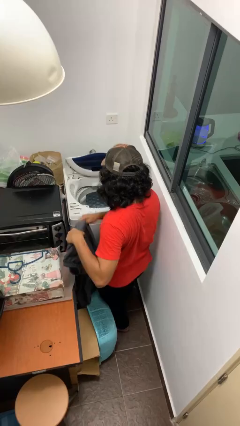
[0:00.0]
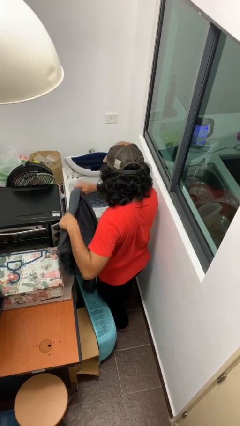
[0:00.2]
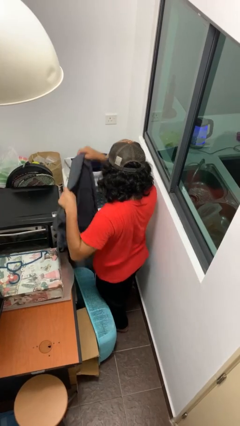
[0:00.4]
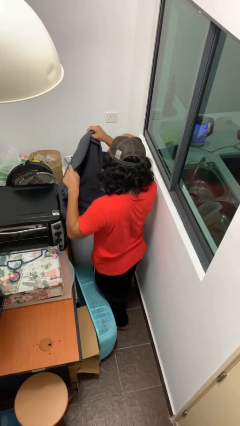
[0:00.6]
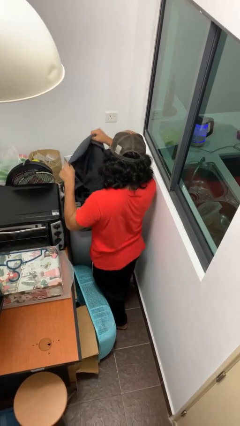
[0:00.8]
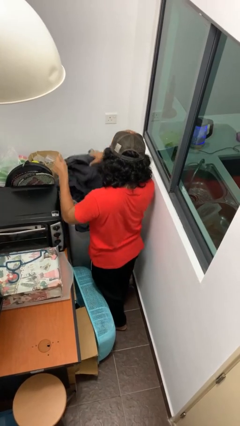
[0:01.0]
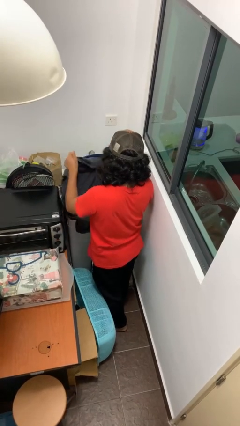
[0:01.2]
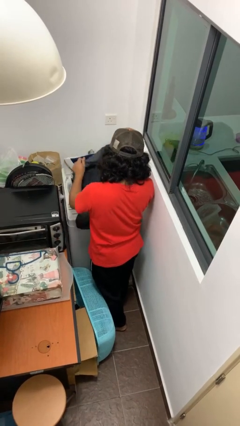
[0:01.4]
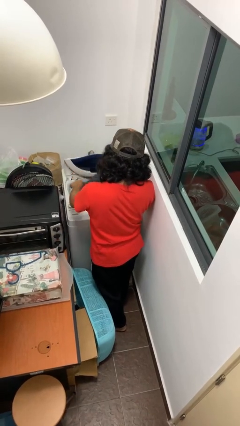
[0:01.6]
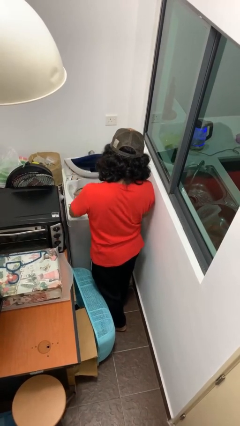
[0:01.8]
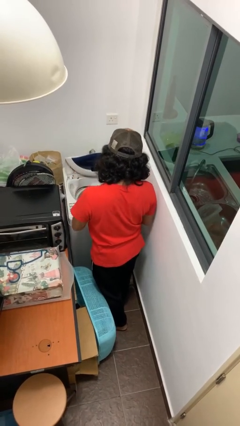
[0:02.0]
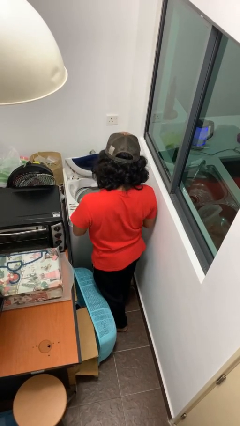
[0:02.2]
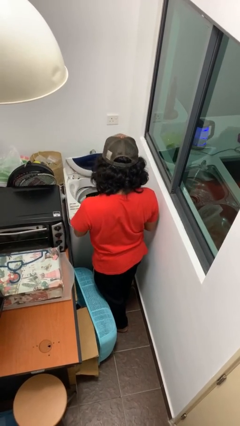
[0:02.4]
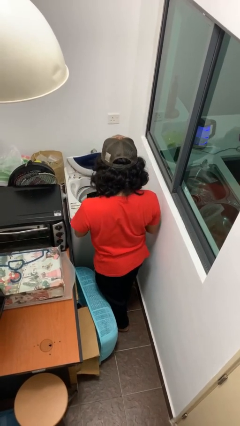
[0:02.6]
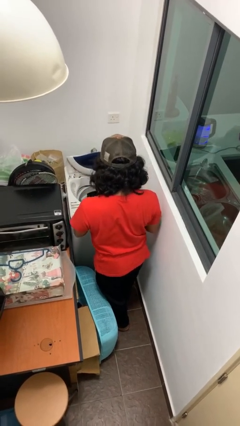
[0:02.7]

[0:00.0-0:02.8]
person loads clotheswasher

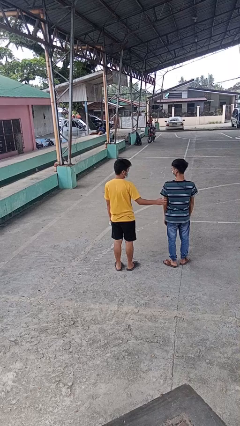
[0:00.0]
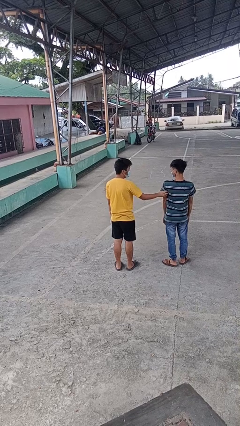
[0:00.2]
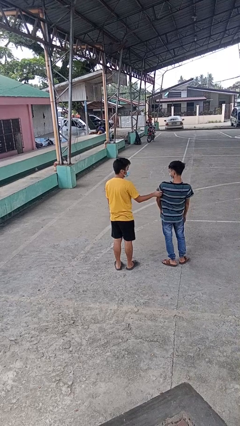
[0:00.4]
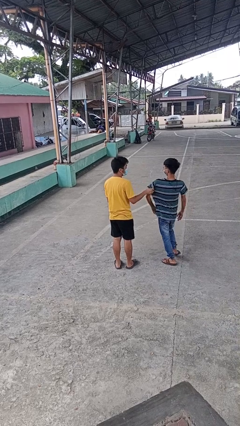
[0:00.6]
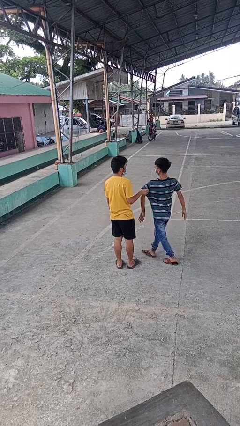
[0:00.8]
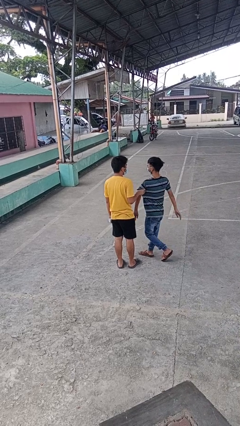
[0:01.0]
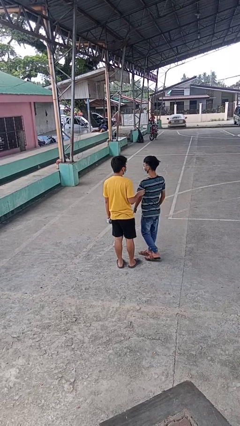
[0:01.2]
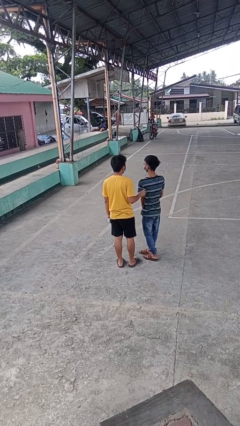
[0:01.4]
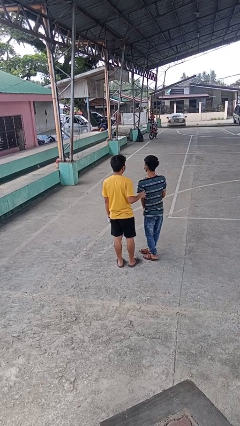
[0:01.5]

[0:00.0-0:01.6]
person grabs person by bicep

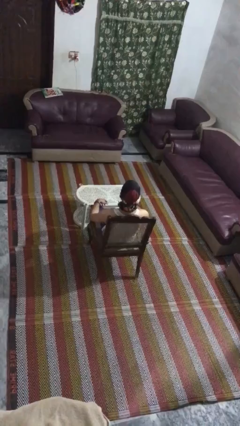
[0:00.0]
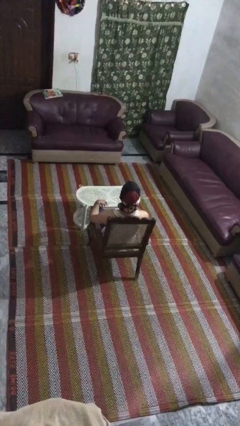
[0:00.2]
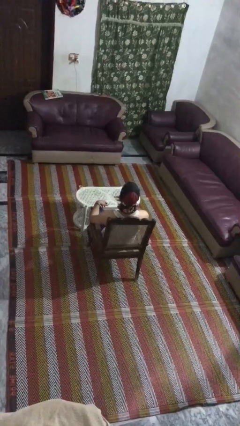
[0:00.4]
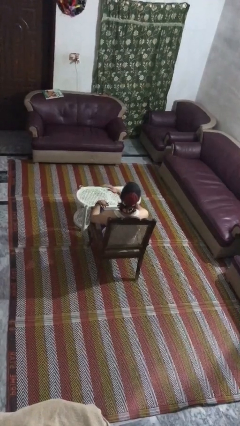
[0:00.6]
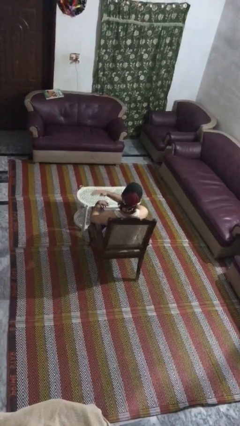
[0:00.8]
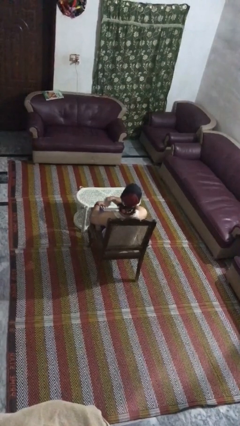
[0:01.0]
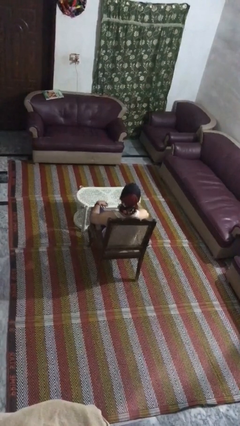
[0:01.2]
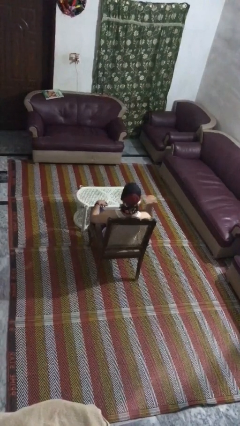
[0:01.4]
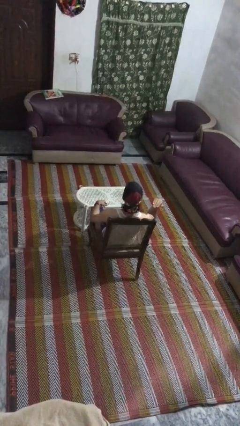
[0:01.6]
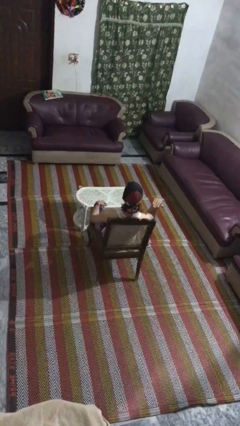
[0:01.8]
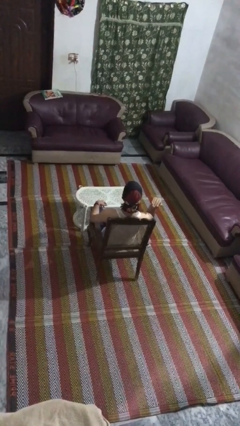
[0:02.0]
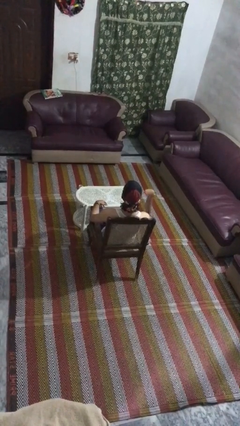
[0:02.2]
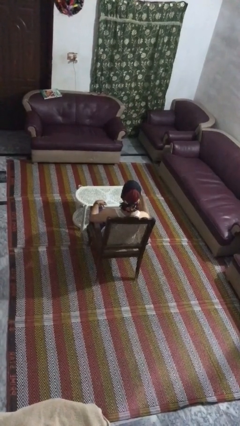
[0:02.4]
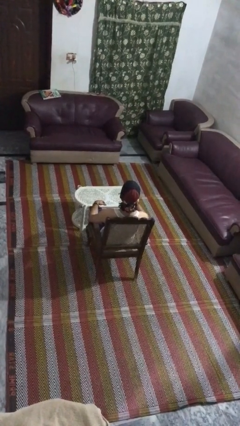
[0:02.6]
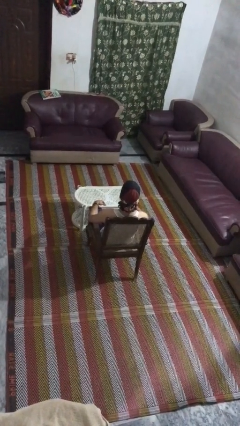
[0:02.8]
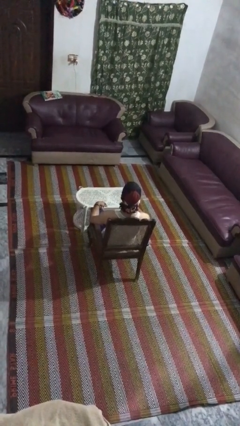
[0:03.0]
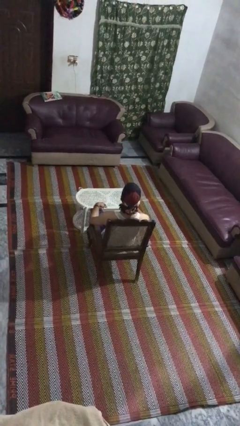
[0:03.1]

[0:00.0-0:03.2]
person gestures cut

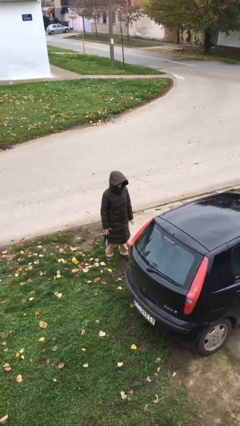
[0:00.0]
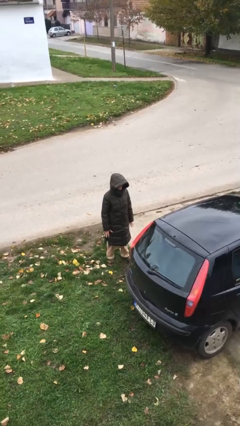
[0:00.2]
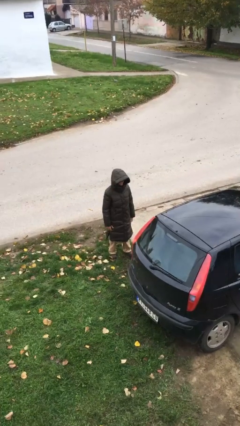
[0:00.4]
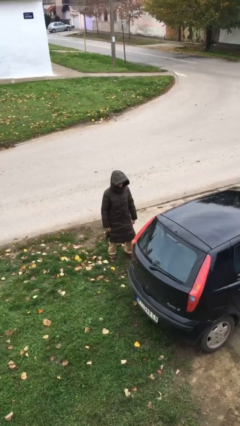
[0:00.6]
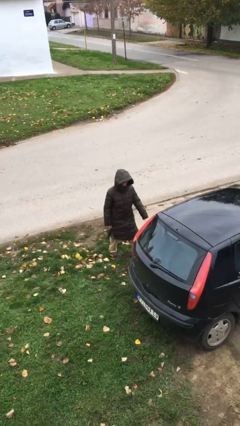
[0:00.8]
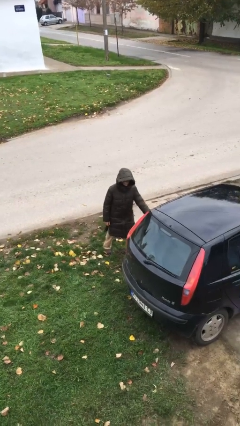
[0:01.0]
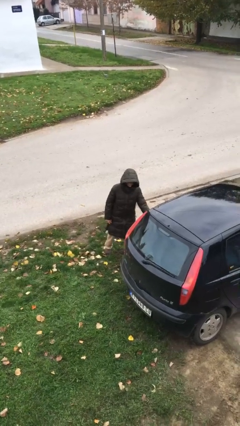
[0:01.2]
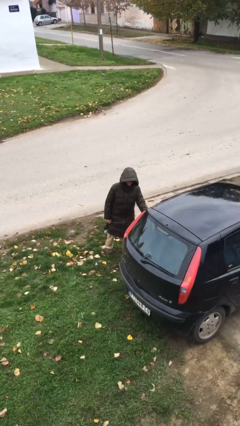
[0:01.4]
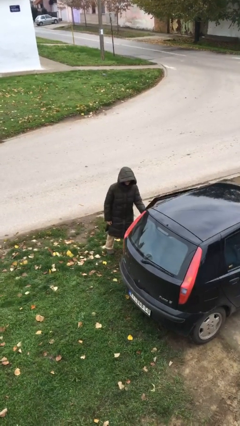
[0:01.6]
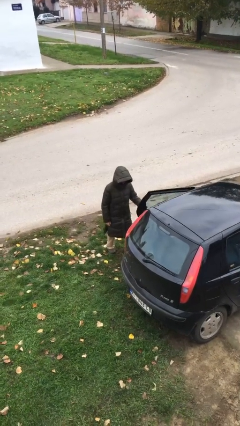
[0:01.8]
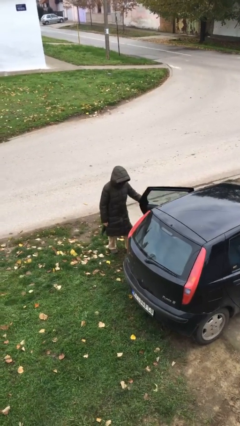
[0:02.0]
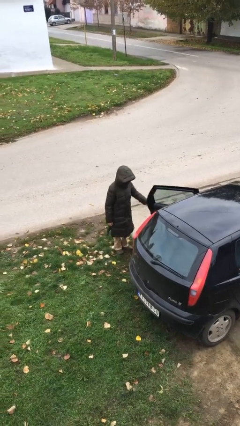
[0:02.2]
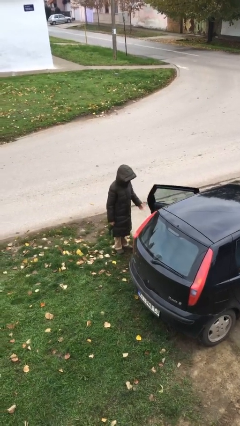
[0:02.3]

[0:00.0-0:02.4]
person opens car door

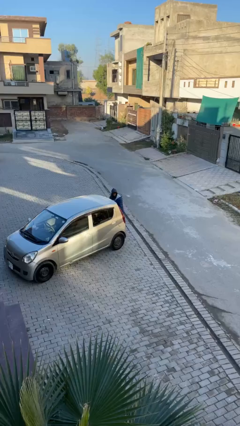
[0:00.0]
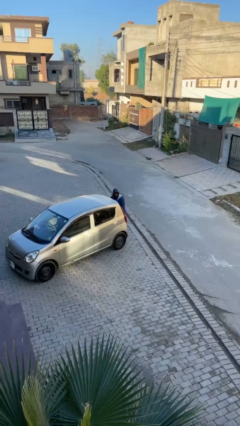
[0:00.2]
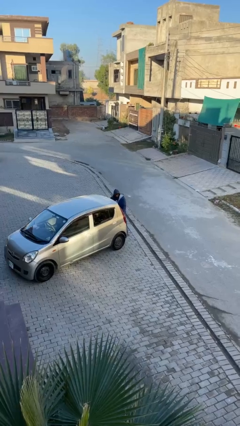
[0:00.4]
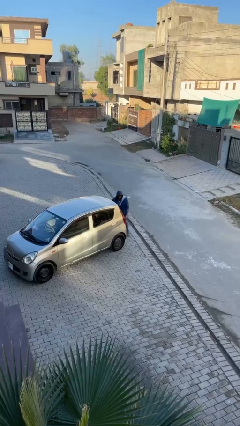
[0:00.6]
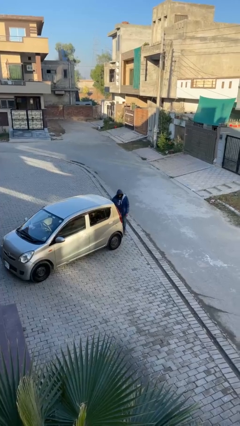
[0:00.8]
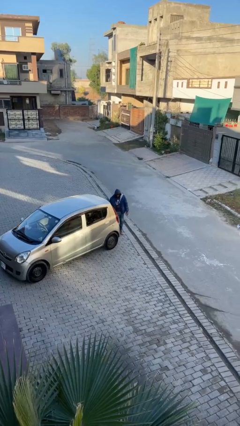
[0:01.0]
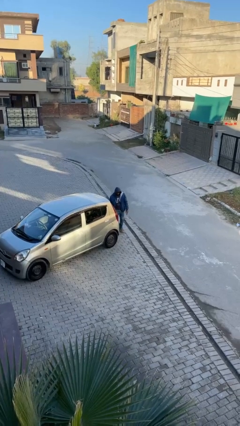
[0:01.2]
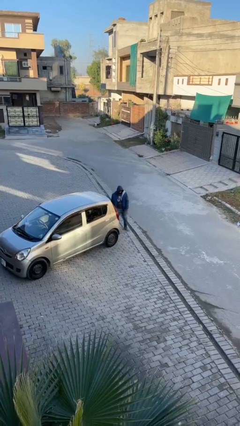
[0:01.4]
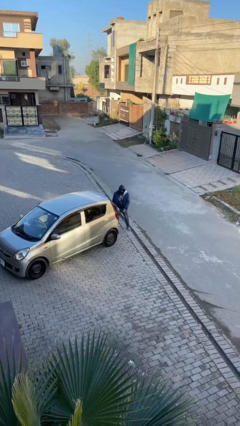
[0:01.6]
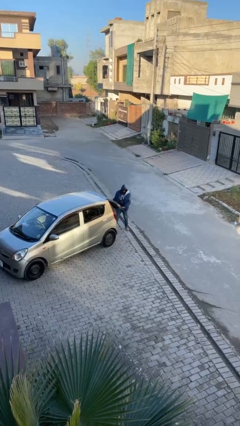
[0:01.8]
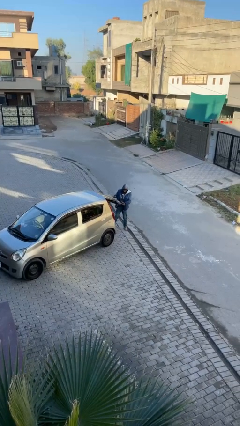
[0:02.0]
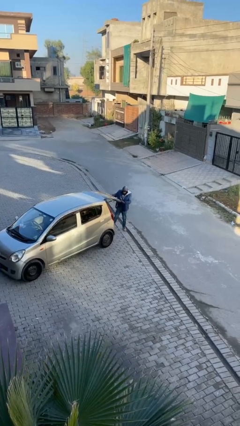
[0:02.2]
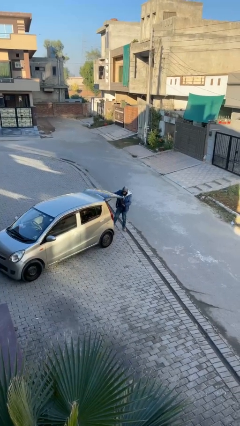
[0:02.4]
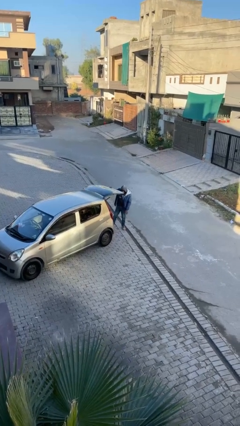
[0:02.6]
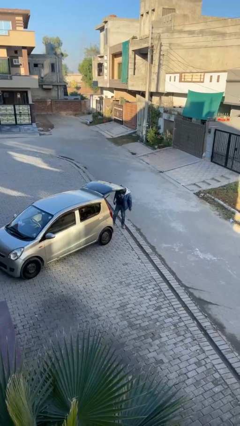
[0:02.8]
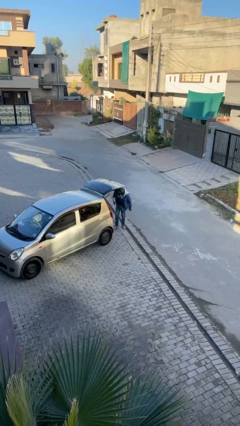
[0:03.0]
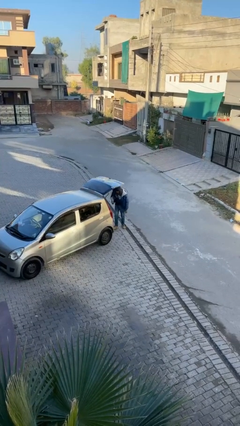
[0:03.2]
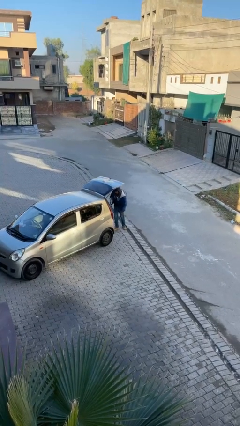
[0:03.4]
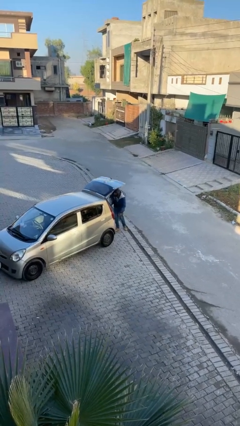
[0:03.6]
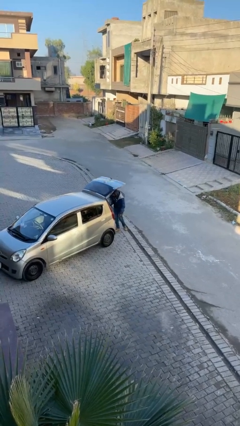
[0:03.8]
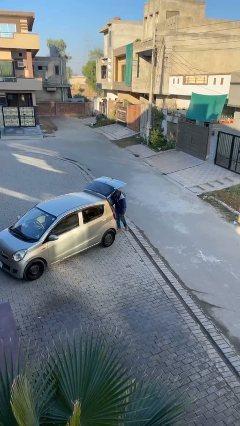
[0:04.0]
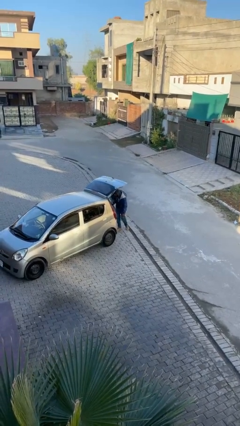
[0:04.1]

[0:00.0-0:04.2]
person opens car trunk

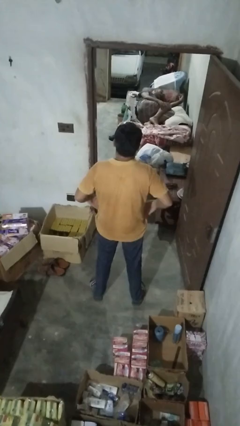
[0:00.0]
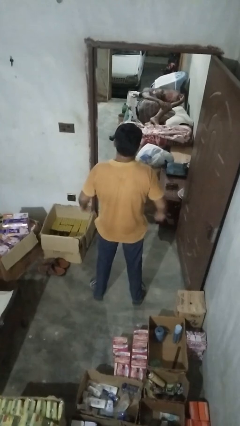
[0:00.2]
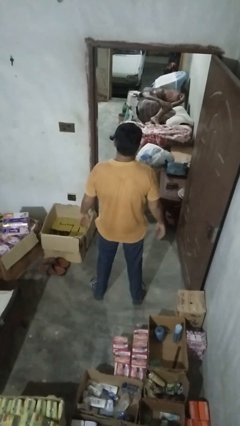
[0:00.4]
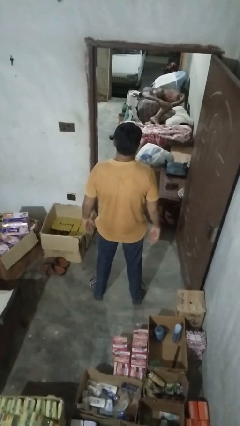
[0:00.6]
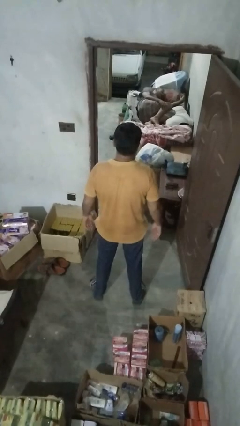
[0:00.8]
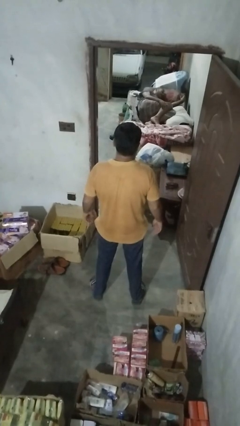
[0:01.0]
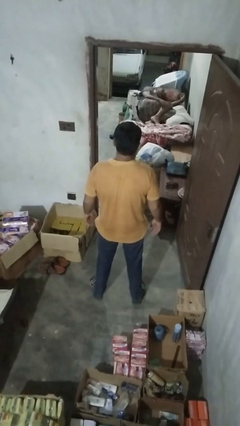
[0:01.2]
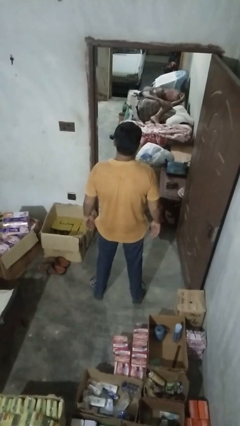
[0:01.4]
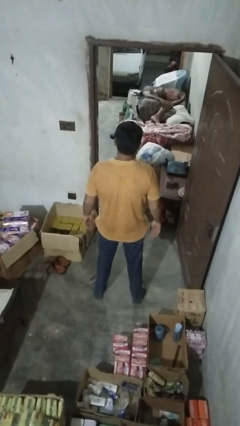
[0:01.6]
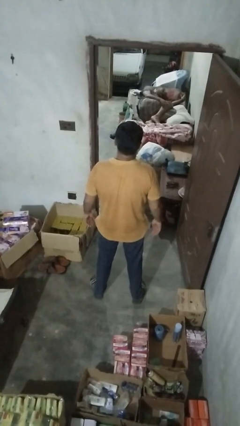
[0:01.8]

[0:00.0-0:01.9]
person puts hands in back pockets

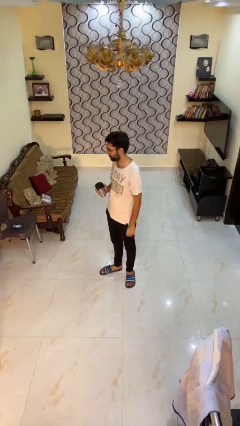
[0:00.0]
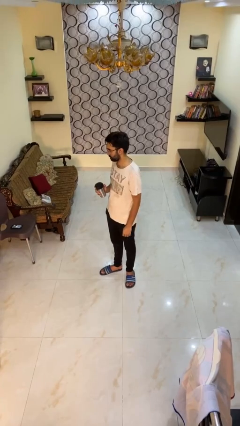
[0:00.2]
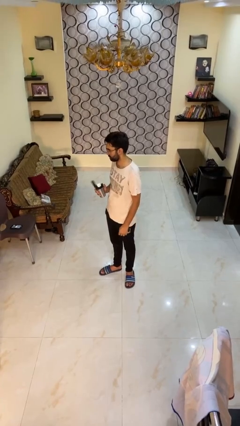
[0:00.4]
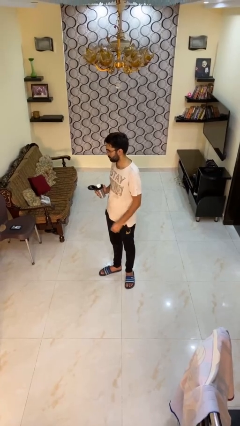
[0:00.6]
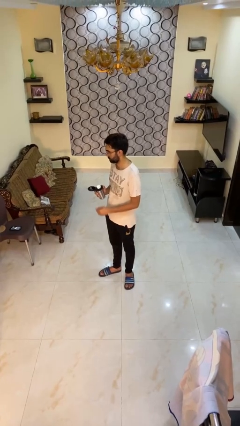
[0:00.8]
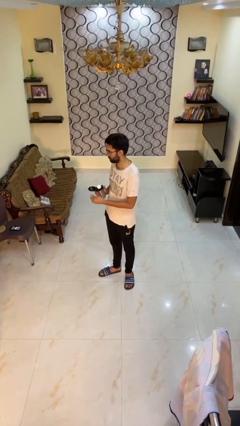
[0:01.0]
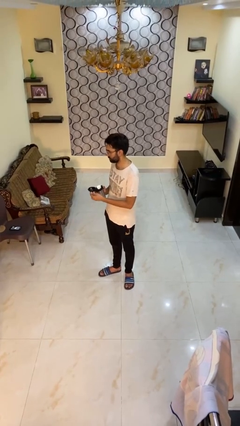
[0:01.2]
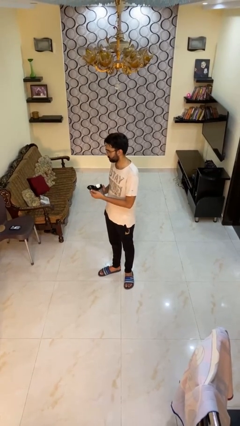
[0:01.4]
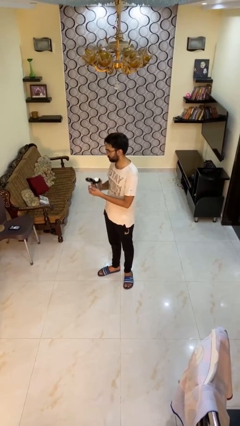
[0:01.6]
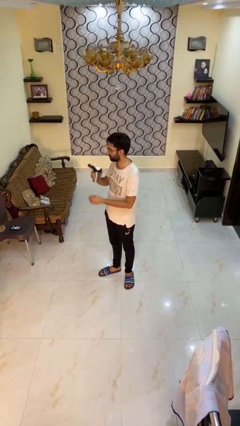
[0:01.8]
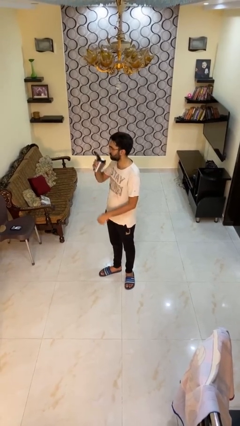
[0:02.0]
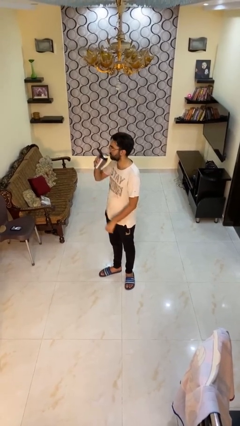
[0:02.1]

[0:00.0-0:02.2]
person opens beverage can
